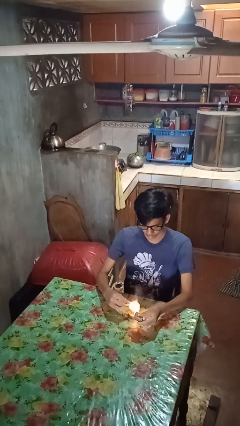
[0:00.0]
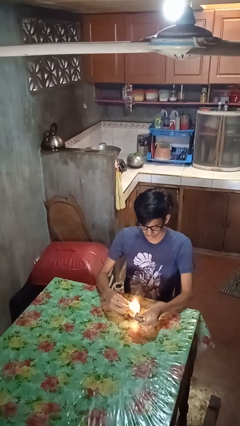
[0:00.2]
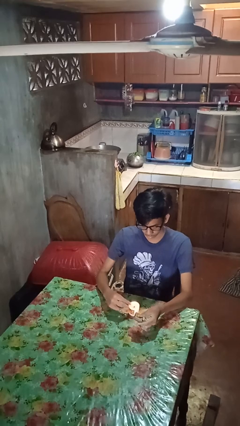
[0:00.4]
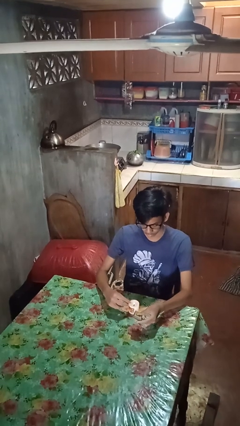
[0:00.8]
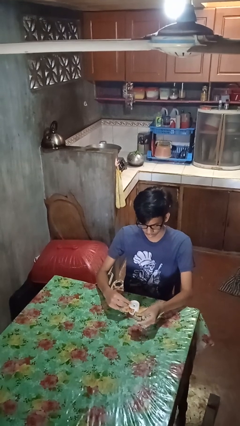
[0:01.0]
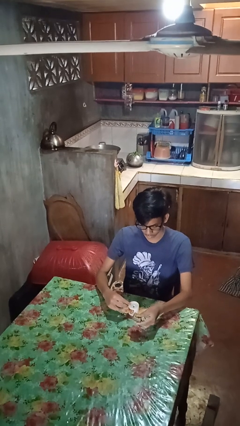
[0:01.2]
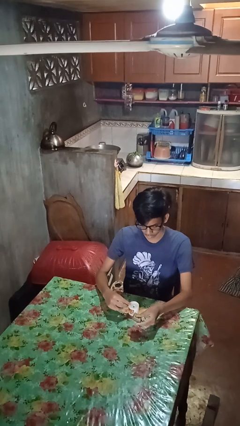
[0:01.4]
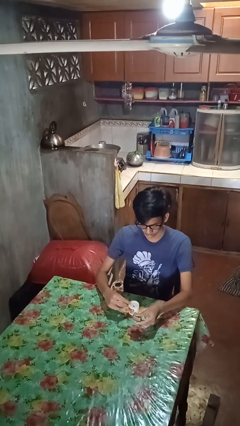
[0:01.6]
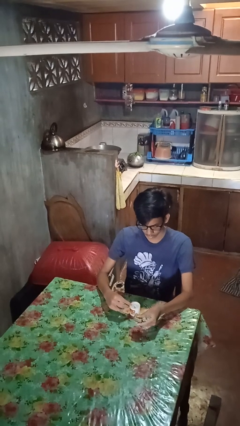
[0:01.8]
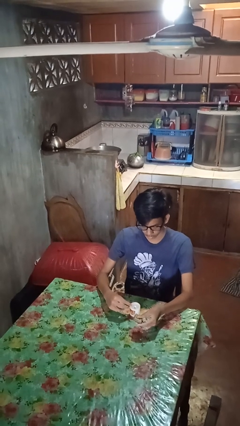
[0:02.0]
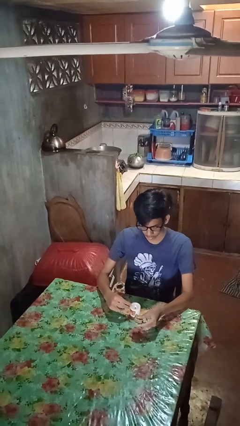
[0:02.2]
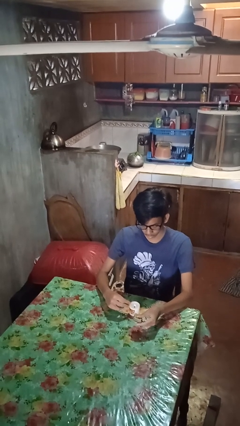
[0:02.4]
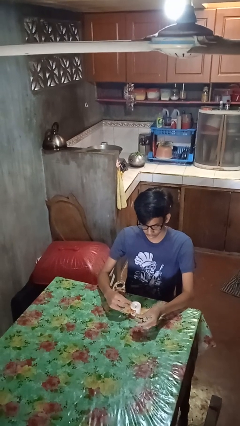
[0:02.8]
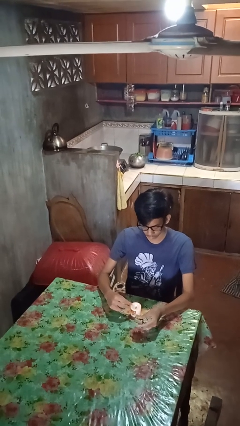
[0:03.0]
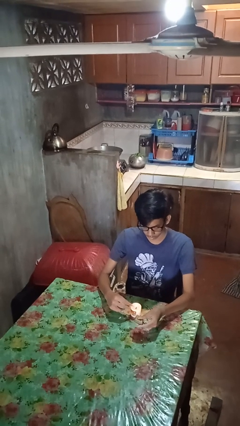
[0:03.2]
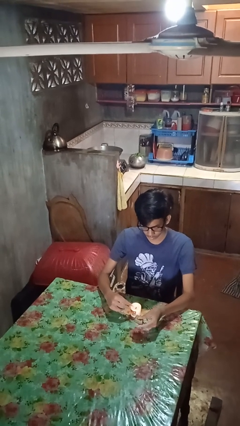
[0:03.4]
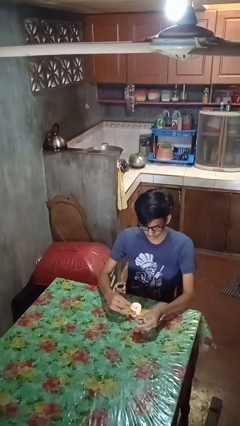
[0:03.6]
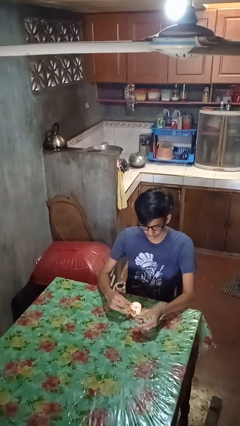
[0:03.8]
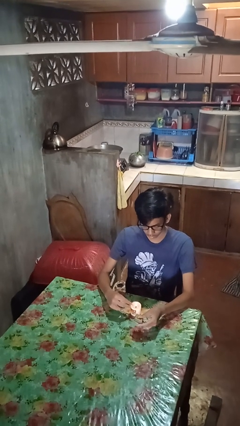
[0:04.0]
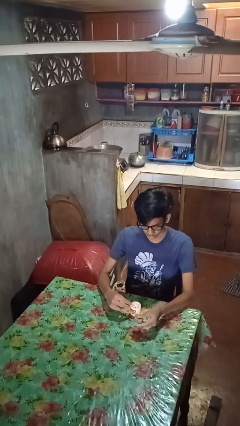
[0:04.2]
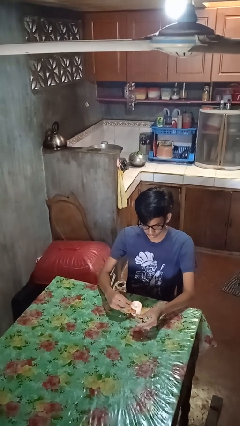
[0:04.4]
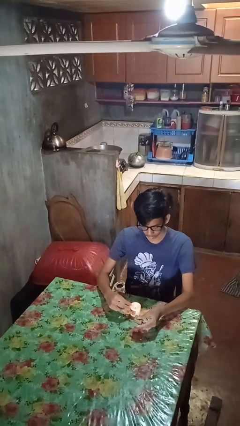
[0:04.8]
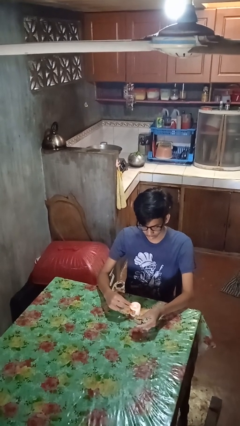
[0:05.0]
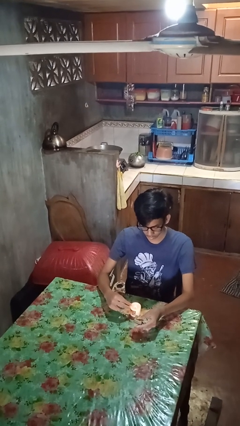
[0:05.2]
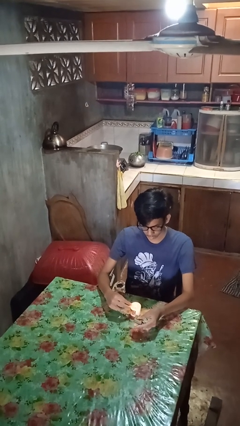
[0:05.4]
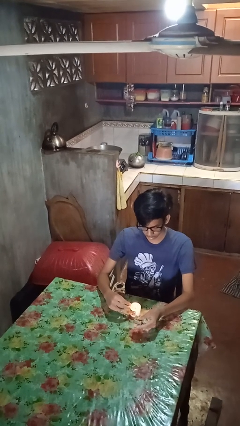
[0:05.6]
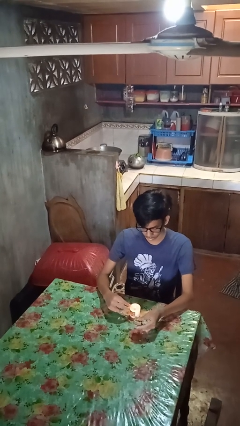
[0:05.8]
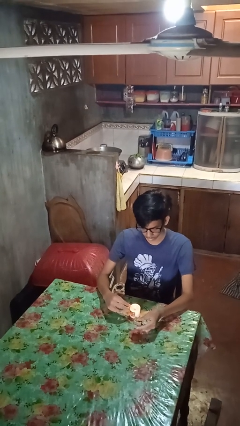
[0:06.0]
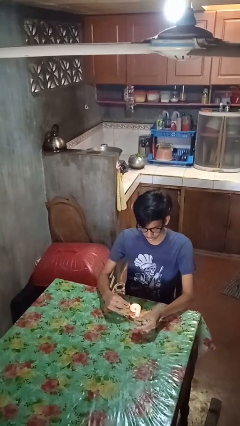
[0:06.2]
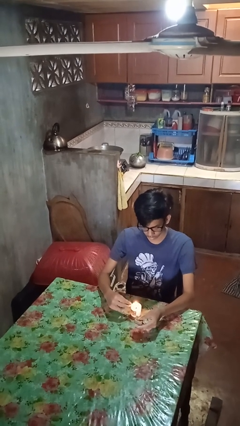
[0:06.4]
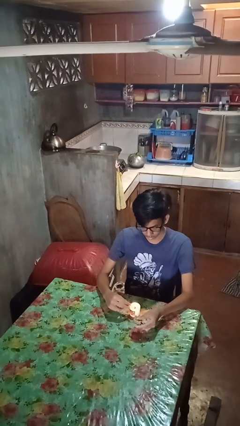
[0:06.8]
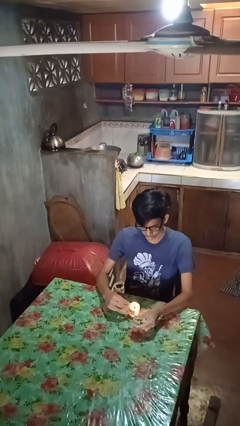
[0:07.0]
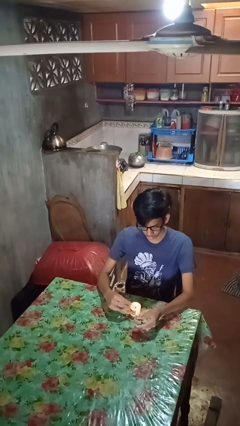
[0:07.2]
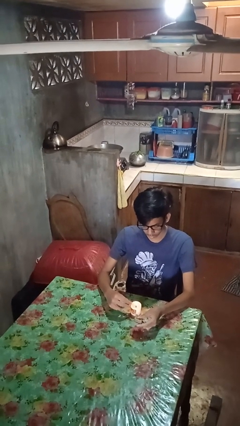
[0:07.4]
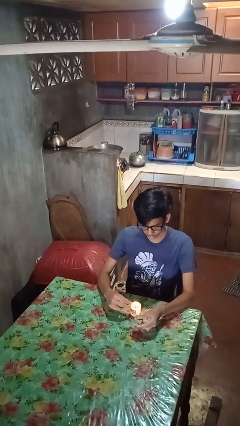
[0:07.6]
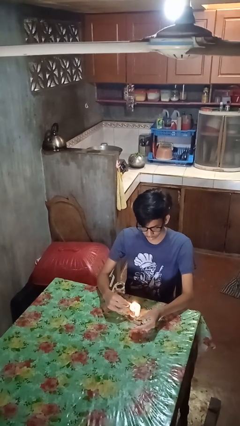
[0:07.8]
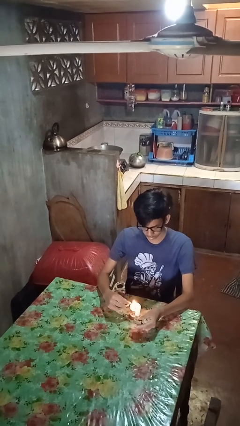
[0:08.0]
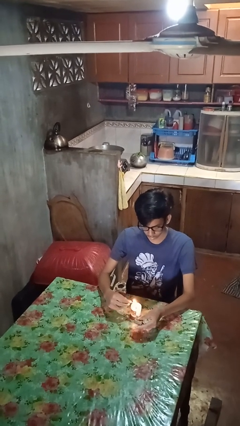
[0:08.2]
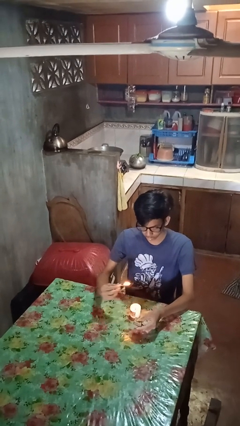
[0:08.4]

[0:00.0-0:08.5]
person lights candle

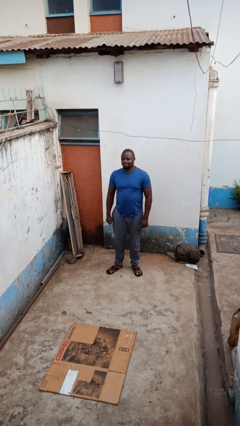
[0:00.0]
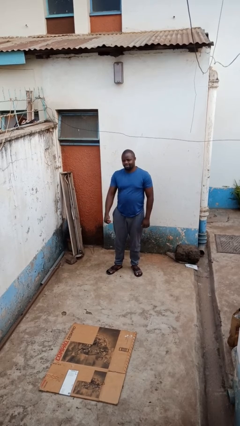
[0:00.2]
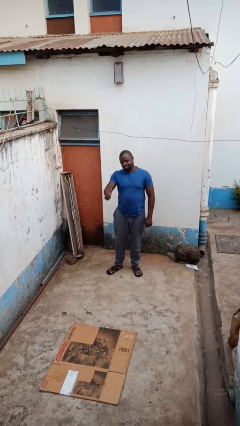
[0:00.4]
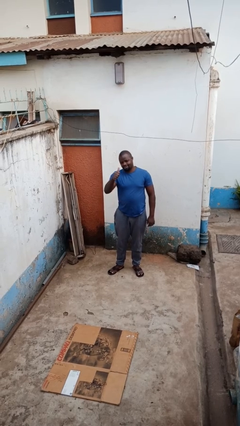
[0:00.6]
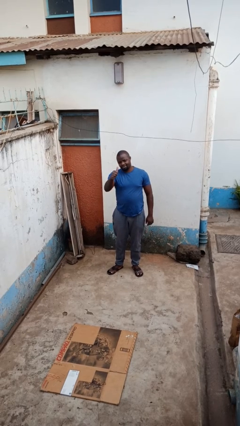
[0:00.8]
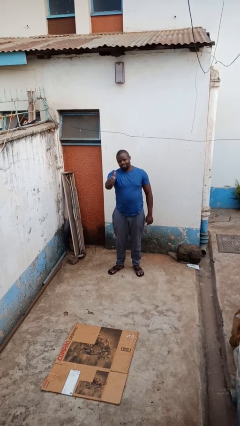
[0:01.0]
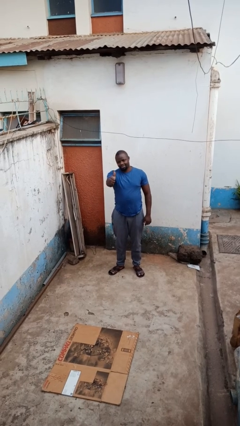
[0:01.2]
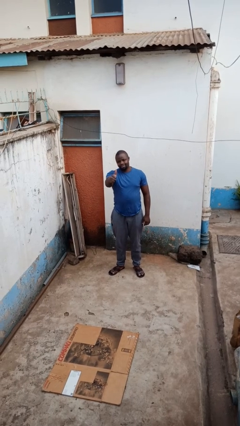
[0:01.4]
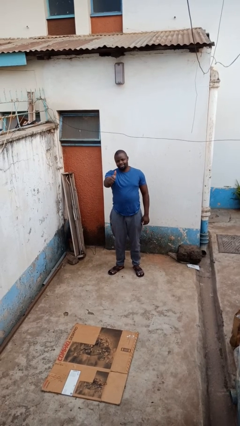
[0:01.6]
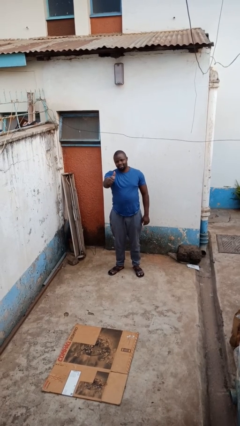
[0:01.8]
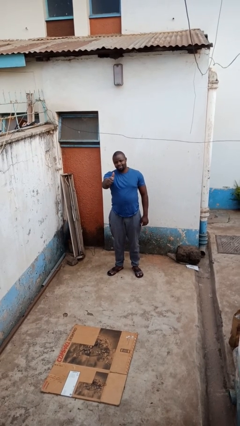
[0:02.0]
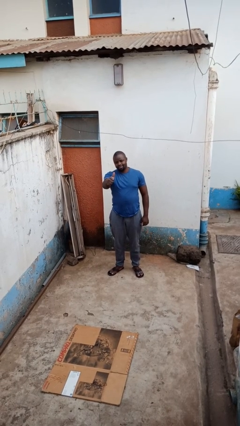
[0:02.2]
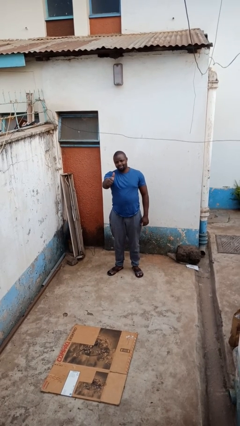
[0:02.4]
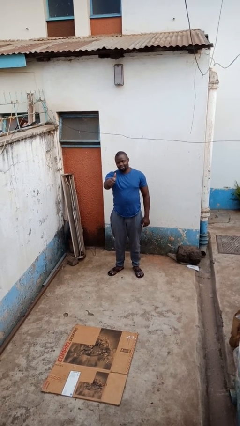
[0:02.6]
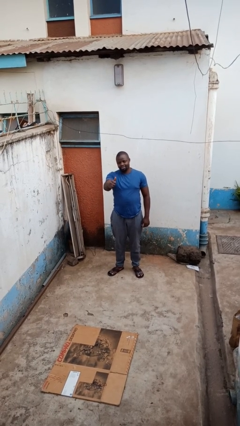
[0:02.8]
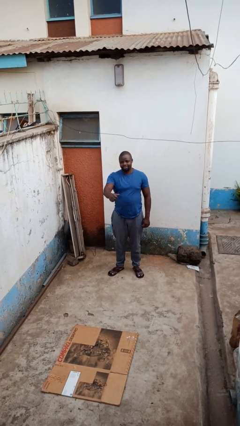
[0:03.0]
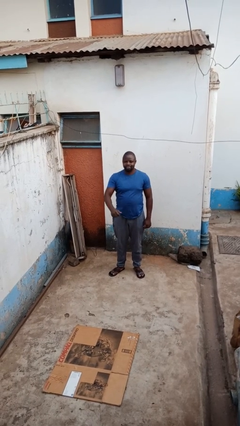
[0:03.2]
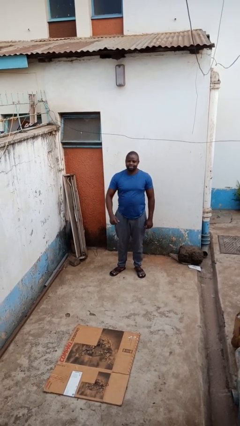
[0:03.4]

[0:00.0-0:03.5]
person gestures thumbs up

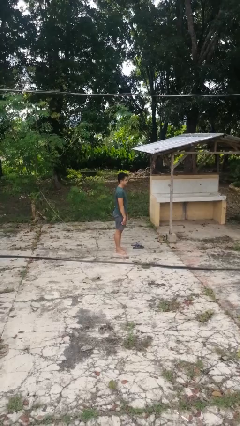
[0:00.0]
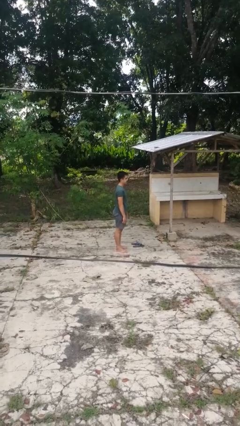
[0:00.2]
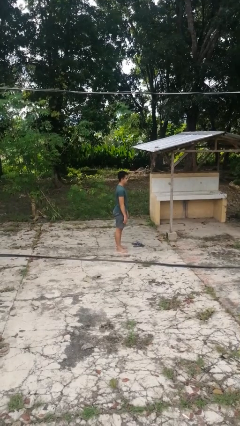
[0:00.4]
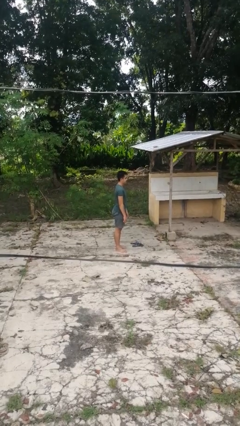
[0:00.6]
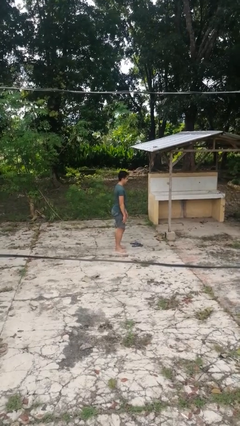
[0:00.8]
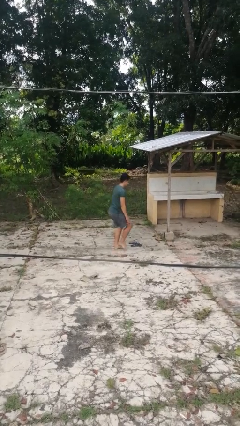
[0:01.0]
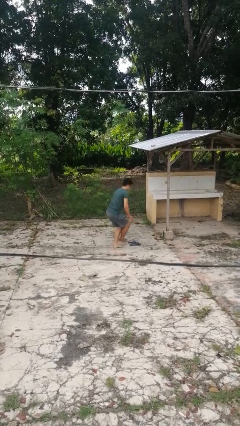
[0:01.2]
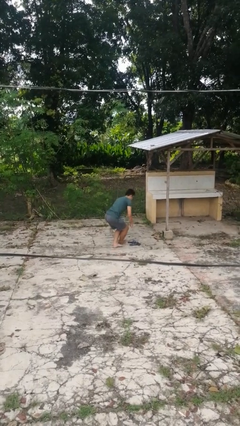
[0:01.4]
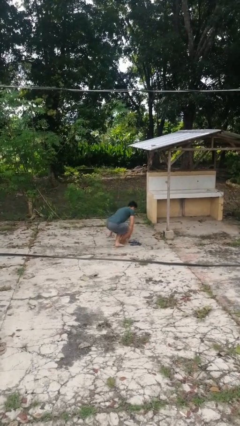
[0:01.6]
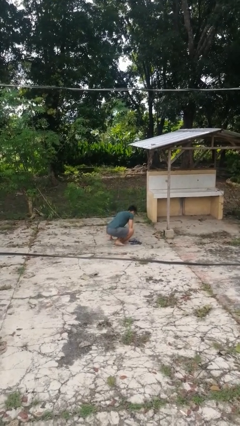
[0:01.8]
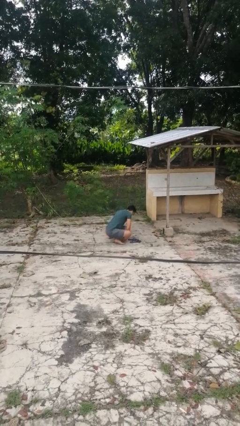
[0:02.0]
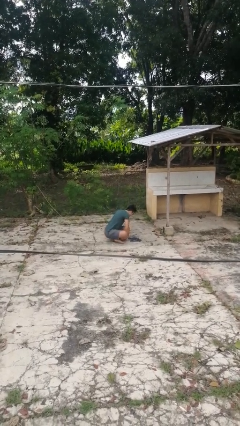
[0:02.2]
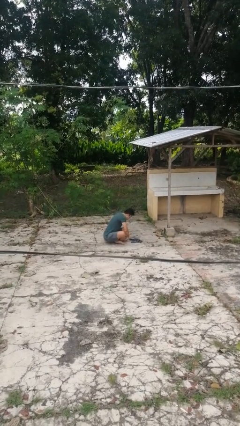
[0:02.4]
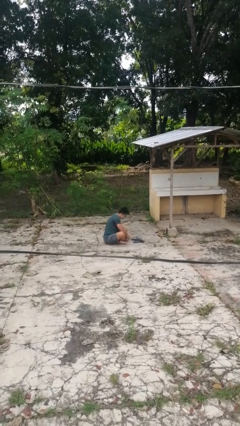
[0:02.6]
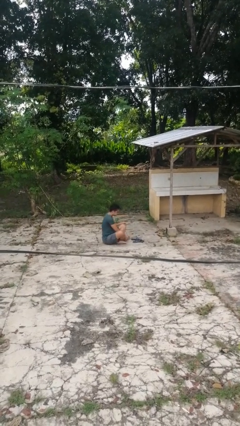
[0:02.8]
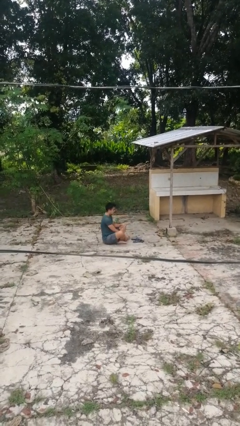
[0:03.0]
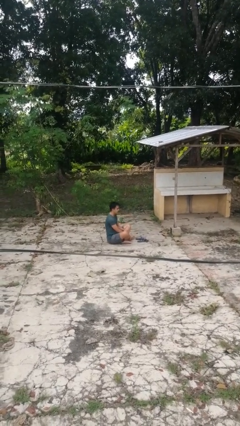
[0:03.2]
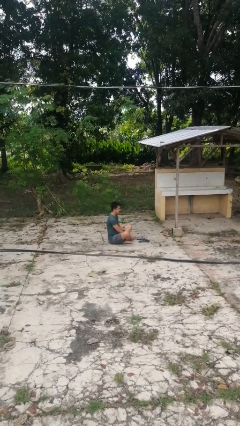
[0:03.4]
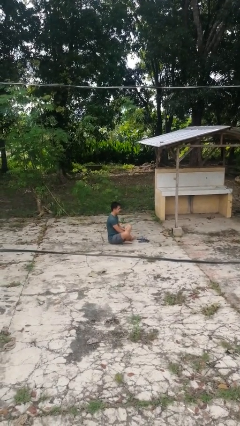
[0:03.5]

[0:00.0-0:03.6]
person sits crisscross

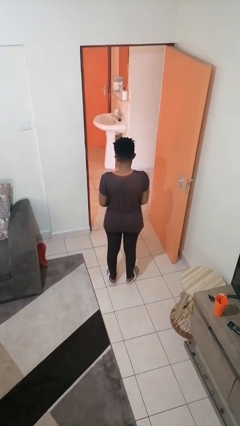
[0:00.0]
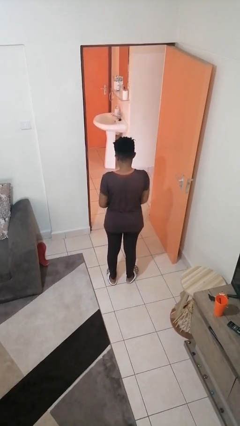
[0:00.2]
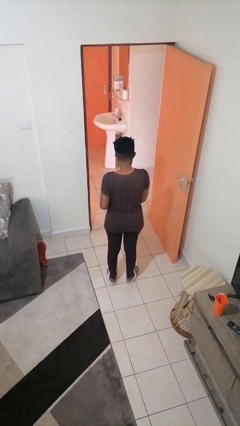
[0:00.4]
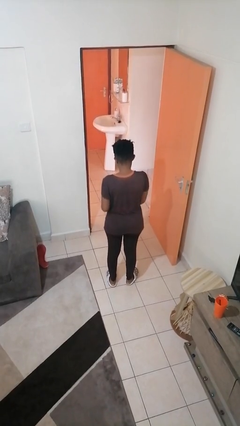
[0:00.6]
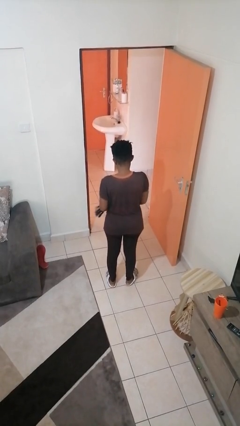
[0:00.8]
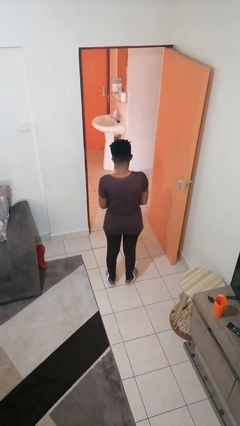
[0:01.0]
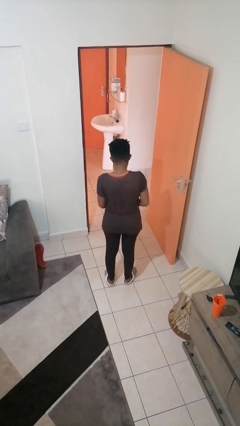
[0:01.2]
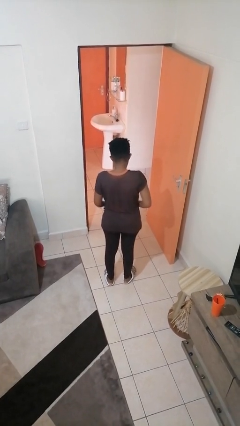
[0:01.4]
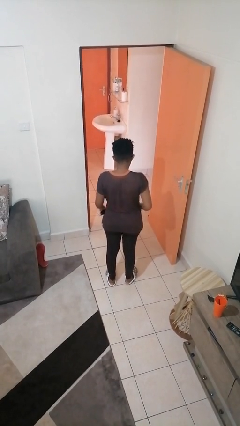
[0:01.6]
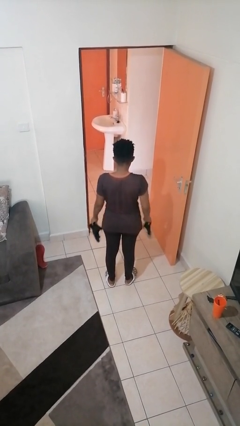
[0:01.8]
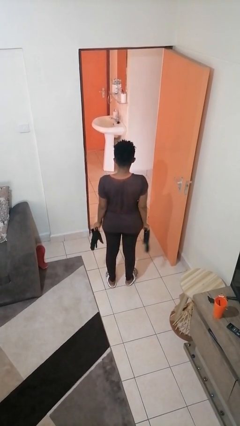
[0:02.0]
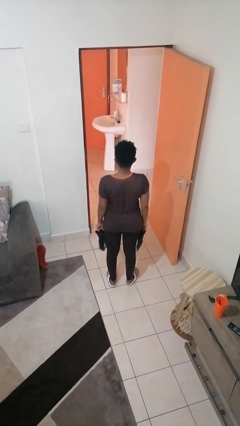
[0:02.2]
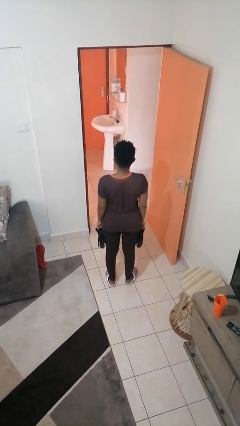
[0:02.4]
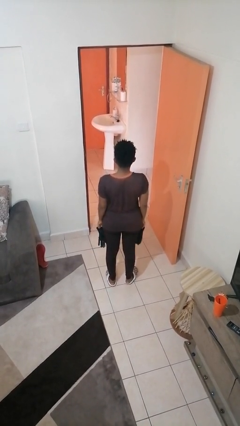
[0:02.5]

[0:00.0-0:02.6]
person takes off gloves

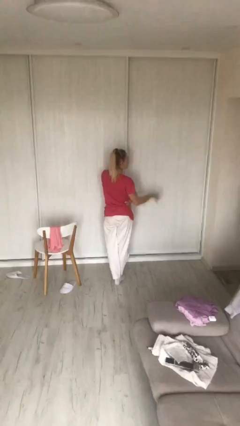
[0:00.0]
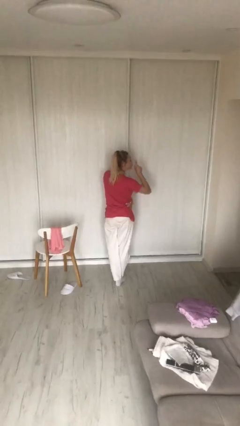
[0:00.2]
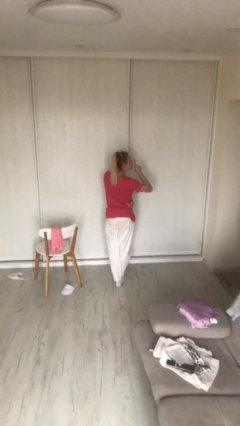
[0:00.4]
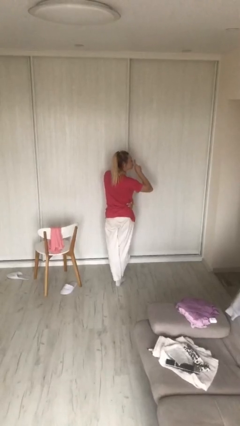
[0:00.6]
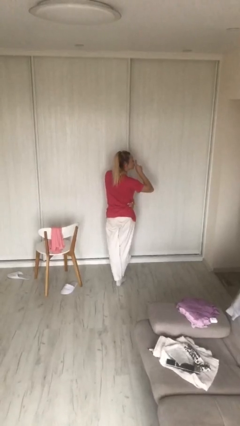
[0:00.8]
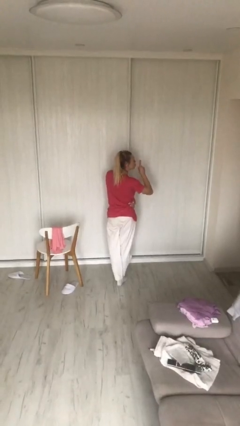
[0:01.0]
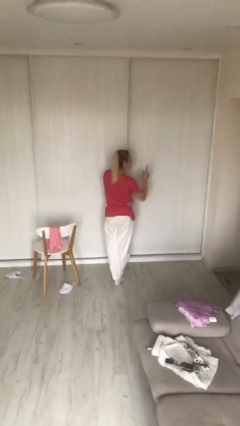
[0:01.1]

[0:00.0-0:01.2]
person gestures be quiet
